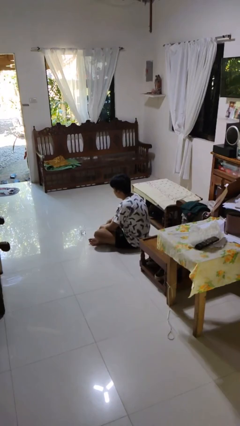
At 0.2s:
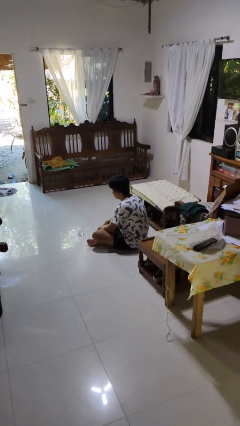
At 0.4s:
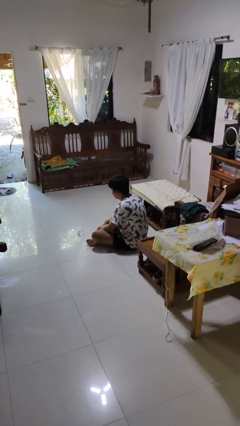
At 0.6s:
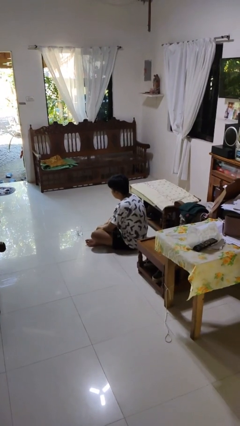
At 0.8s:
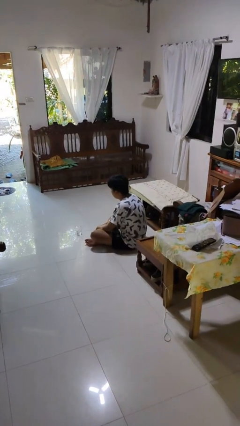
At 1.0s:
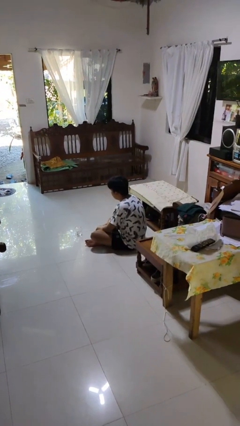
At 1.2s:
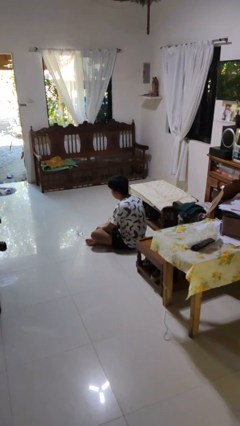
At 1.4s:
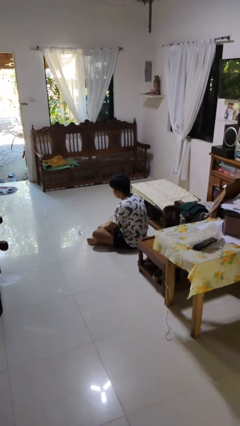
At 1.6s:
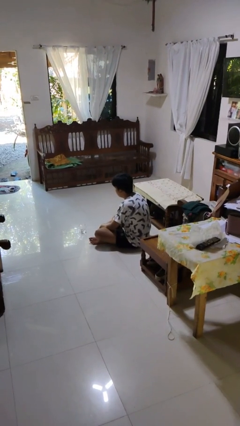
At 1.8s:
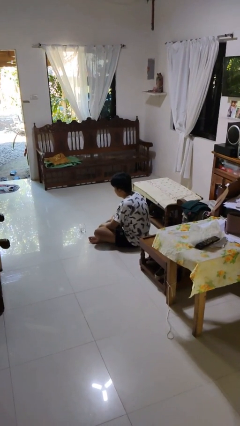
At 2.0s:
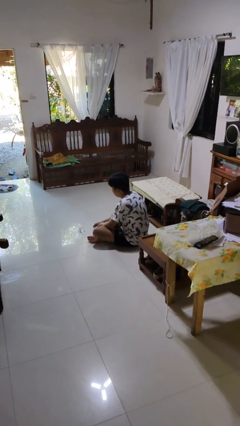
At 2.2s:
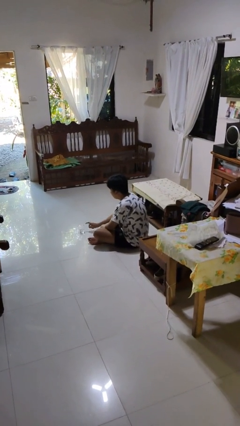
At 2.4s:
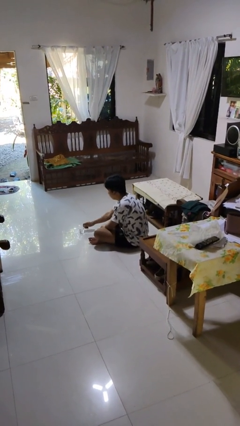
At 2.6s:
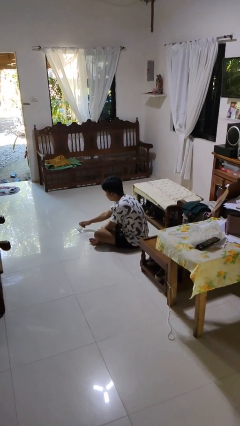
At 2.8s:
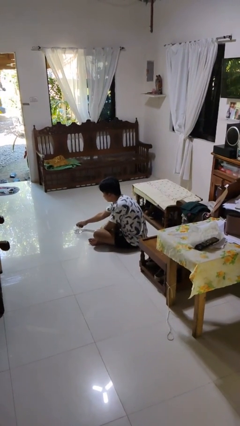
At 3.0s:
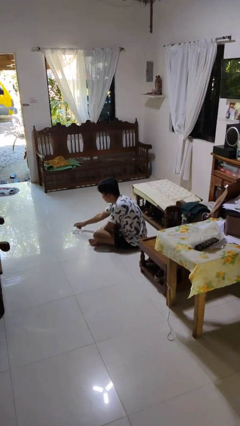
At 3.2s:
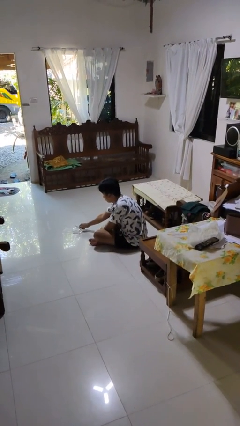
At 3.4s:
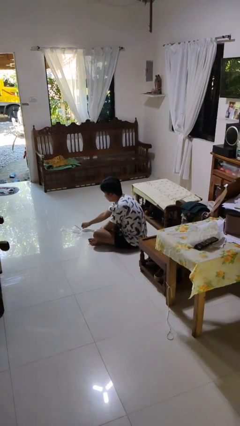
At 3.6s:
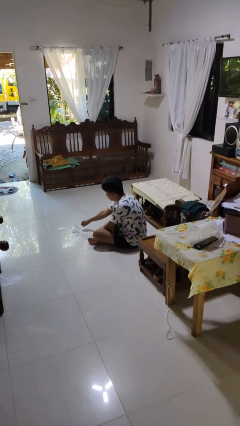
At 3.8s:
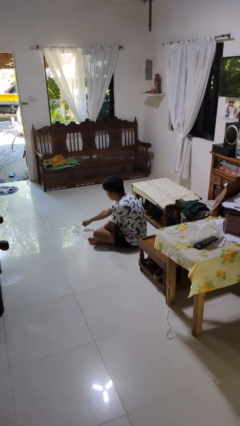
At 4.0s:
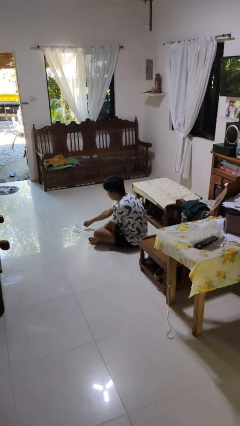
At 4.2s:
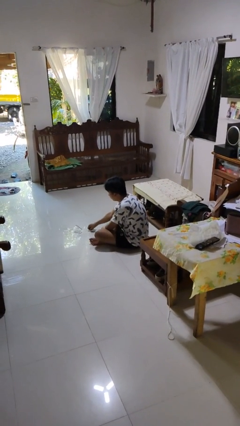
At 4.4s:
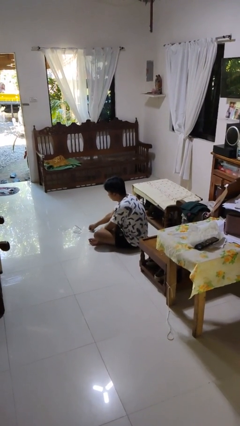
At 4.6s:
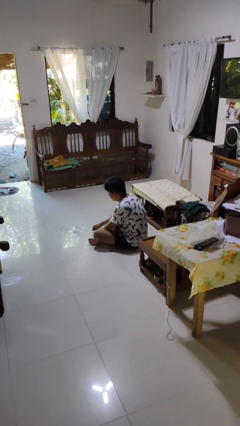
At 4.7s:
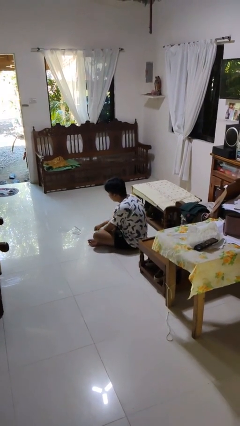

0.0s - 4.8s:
person spills on floor

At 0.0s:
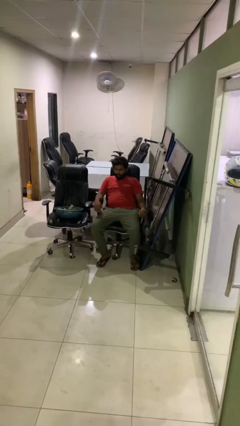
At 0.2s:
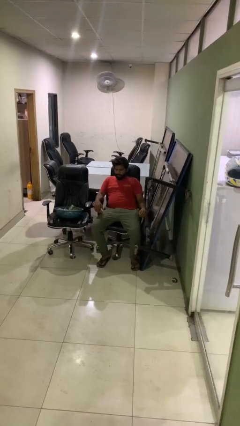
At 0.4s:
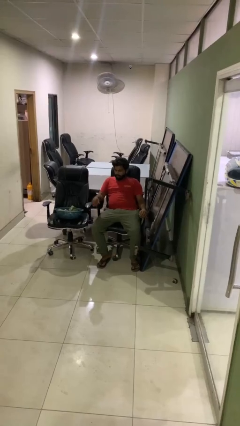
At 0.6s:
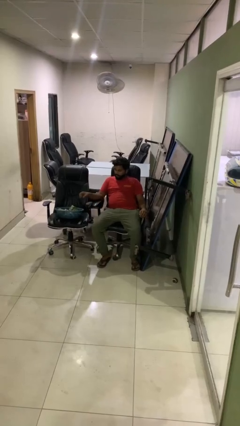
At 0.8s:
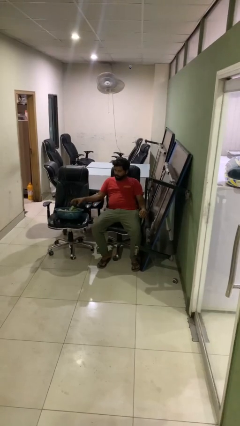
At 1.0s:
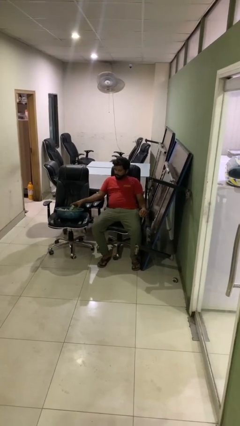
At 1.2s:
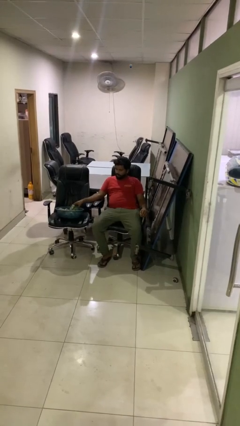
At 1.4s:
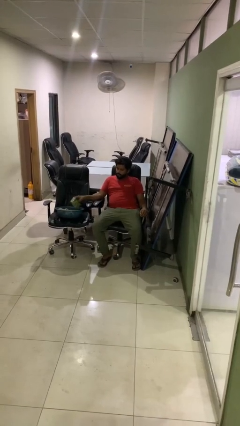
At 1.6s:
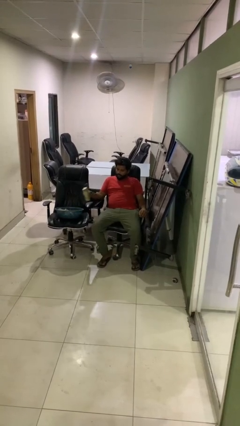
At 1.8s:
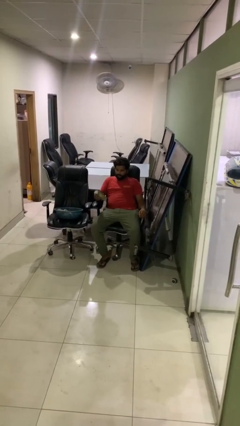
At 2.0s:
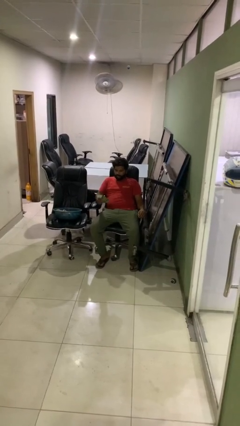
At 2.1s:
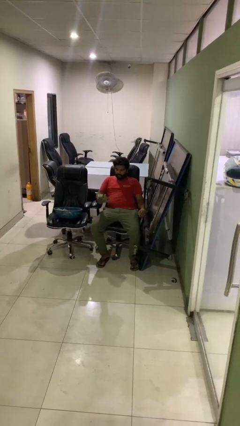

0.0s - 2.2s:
person takes object from basket

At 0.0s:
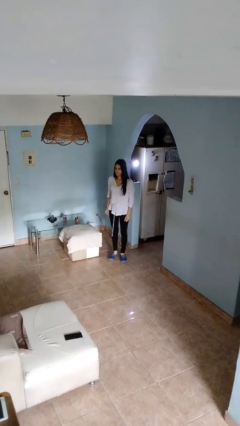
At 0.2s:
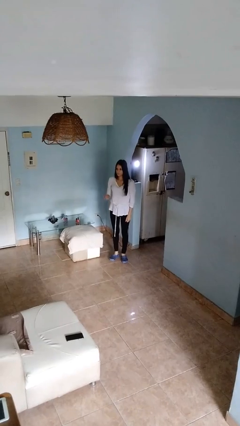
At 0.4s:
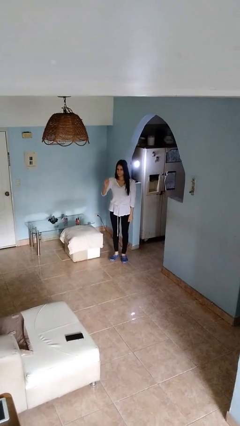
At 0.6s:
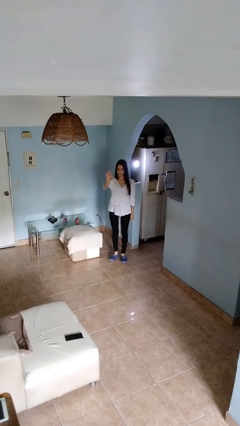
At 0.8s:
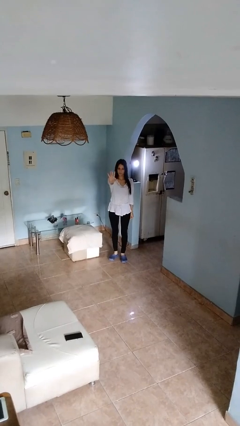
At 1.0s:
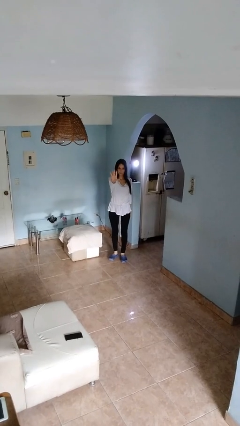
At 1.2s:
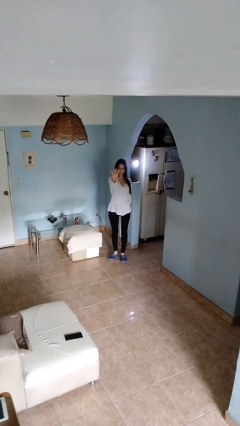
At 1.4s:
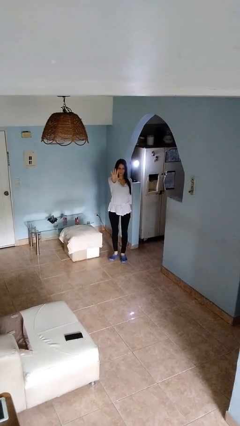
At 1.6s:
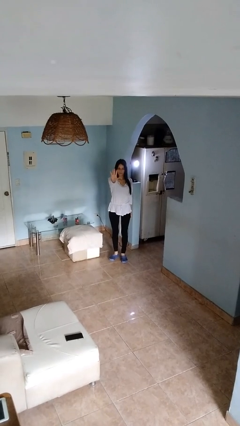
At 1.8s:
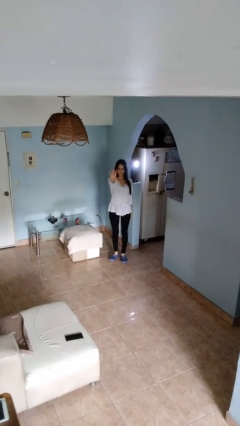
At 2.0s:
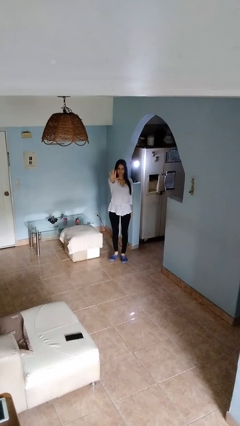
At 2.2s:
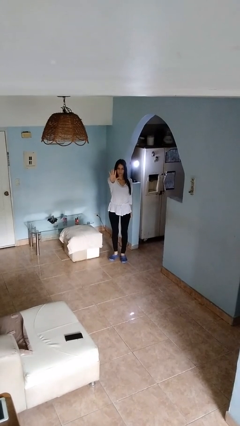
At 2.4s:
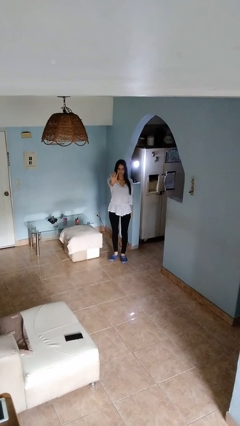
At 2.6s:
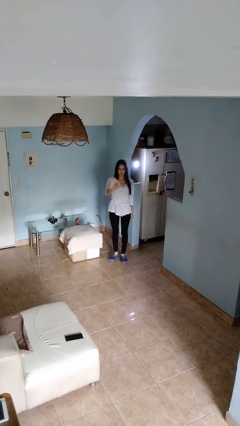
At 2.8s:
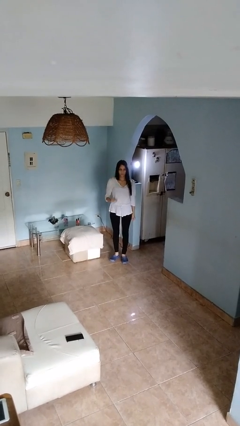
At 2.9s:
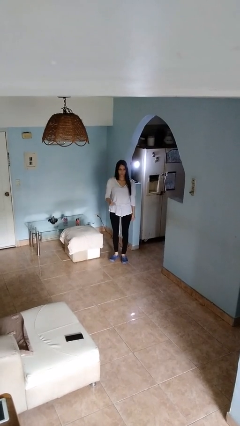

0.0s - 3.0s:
person gestures number five

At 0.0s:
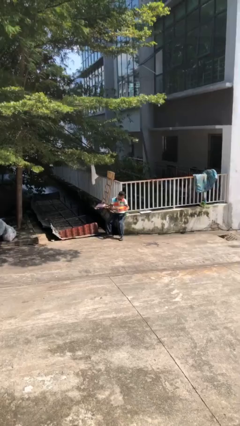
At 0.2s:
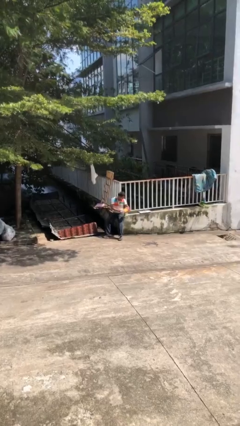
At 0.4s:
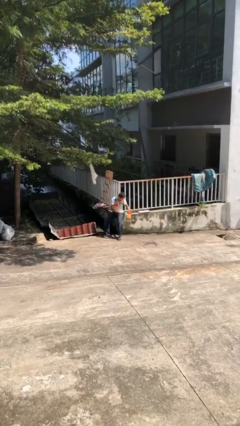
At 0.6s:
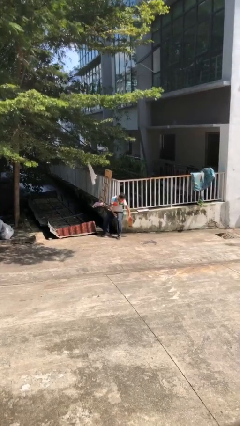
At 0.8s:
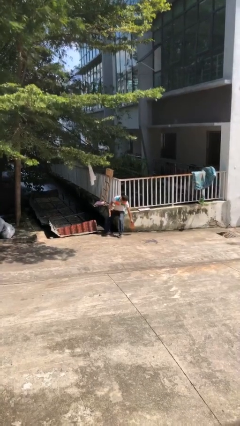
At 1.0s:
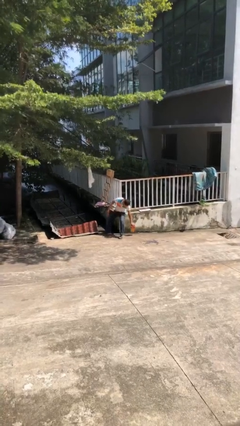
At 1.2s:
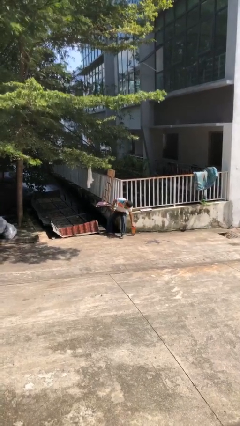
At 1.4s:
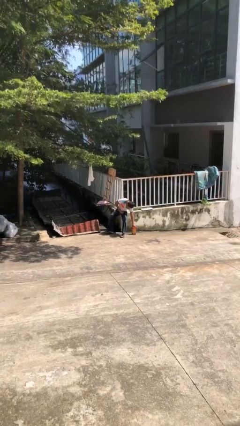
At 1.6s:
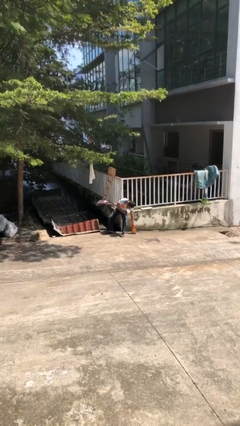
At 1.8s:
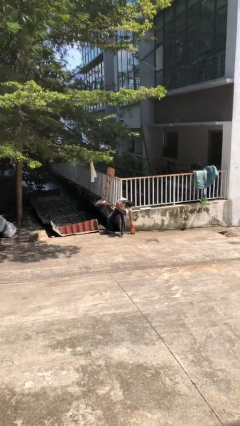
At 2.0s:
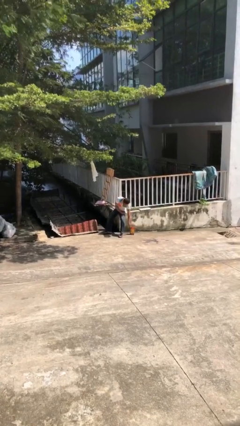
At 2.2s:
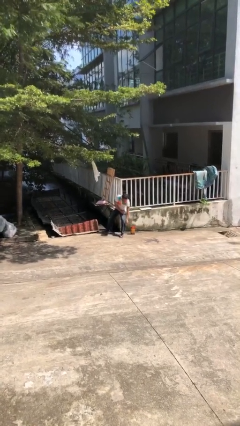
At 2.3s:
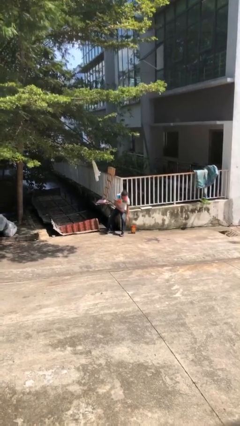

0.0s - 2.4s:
person puts down object on floor

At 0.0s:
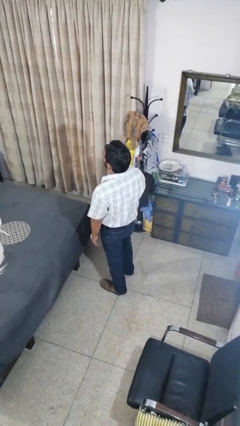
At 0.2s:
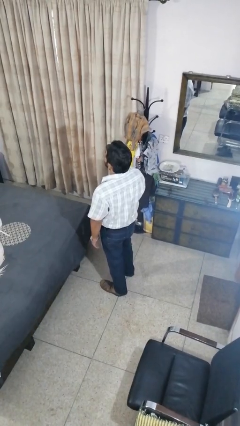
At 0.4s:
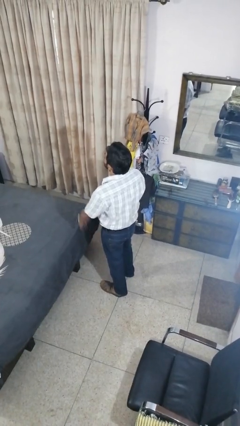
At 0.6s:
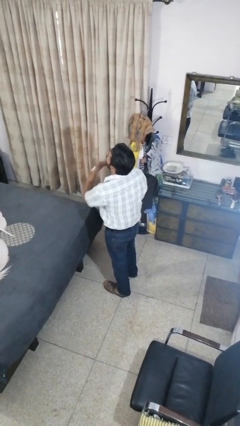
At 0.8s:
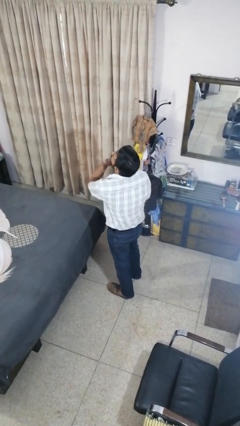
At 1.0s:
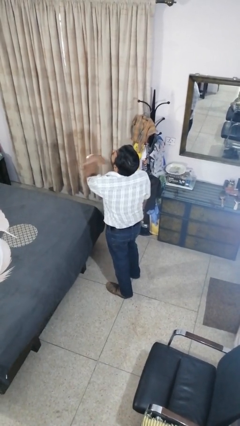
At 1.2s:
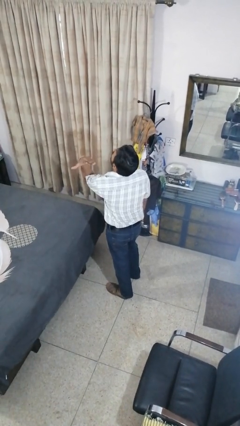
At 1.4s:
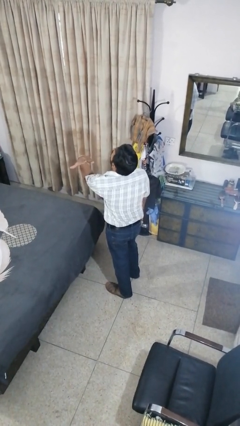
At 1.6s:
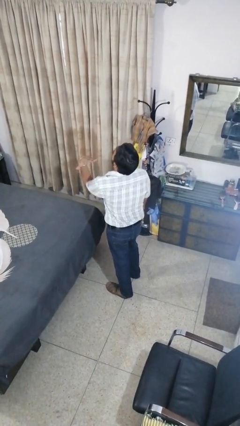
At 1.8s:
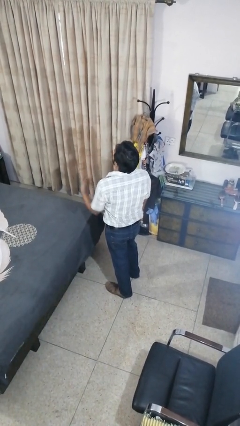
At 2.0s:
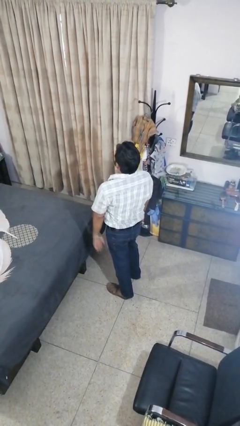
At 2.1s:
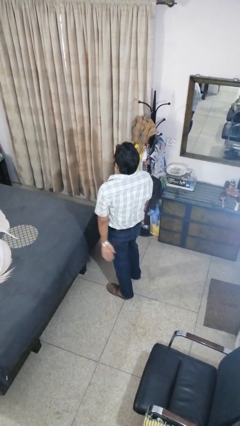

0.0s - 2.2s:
person gestures cut

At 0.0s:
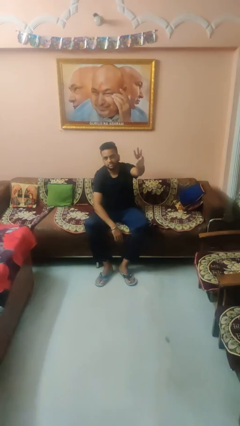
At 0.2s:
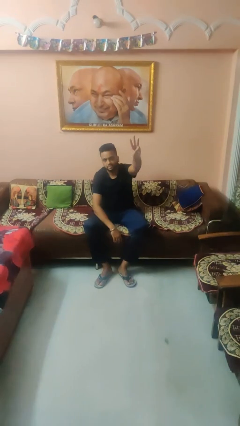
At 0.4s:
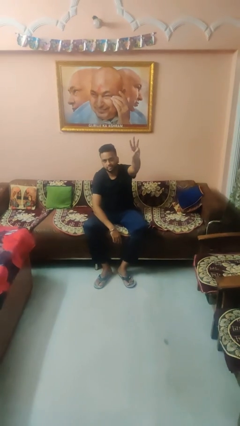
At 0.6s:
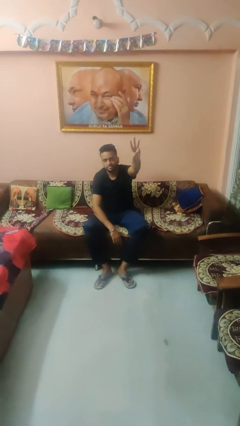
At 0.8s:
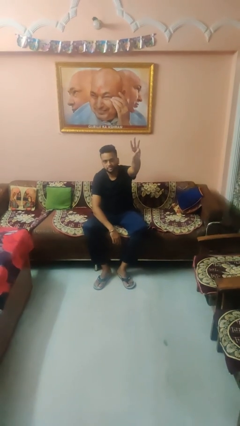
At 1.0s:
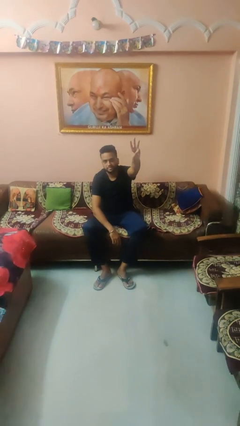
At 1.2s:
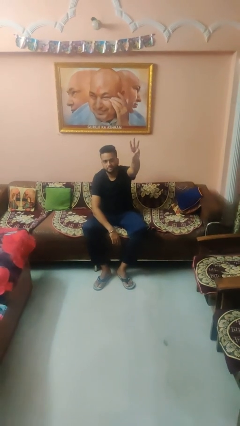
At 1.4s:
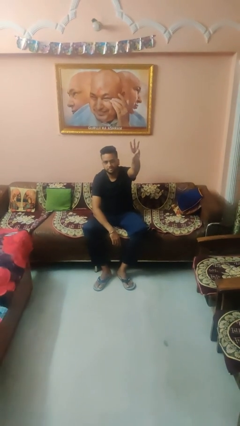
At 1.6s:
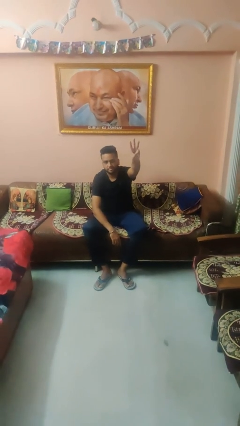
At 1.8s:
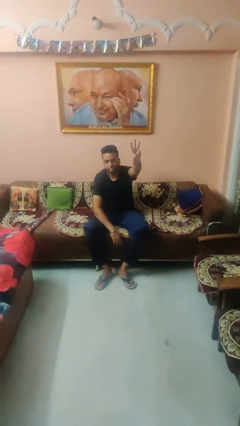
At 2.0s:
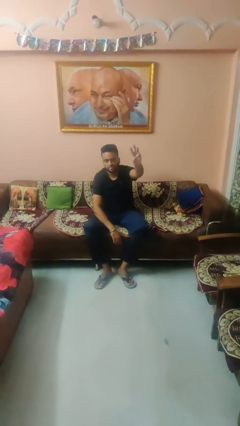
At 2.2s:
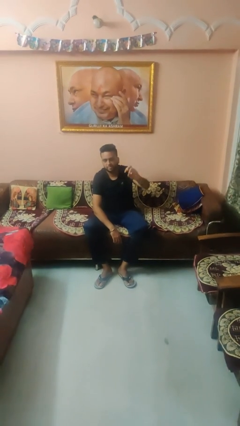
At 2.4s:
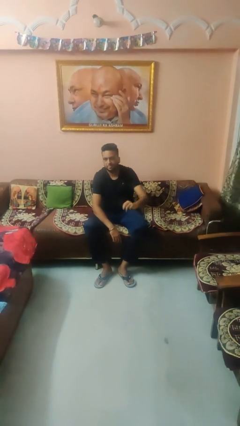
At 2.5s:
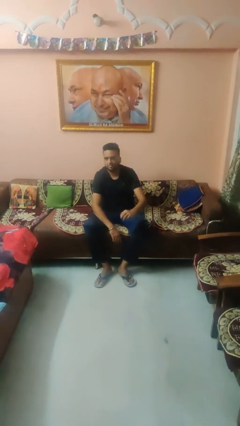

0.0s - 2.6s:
person gestures number three

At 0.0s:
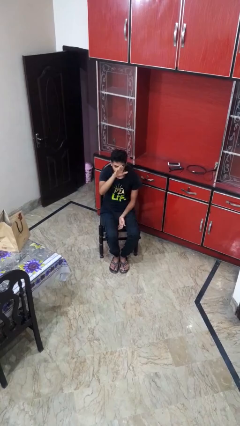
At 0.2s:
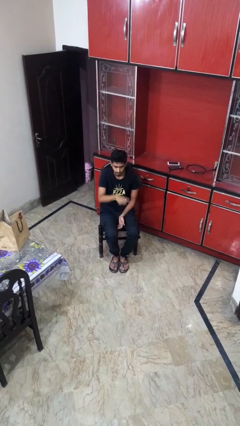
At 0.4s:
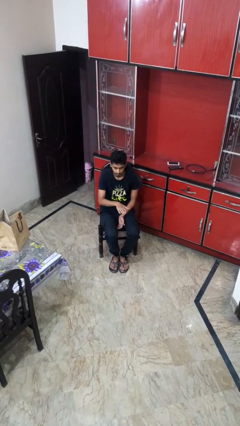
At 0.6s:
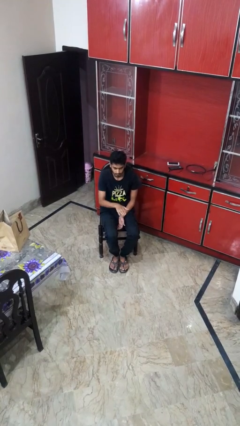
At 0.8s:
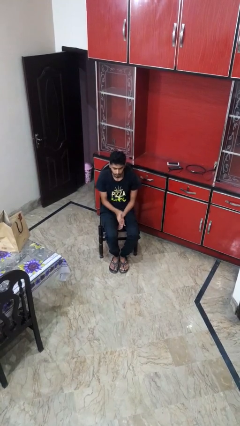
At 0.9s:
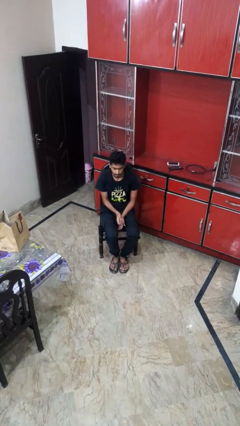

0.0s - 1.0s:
person gestures swipe down
